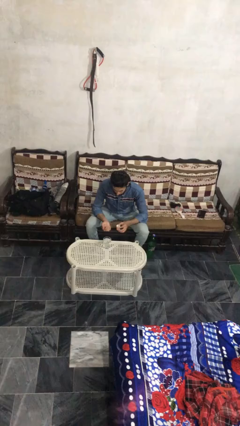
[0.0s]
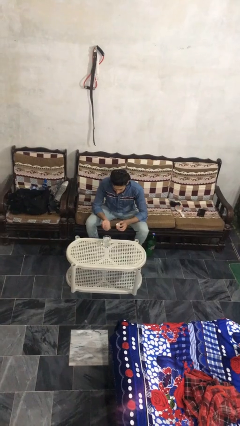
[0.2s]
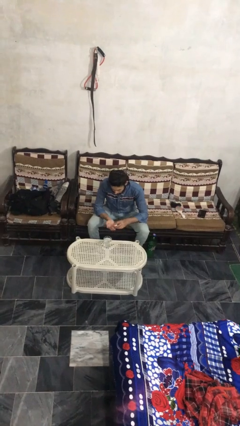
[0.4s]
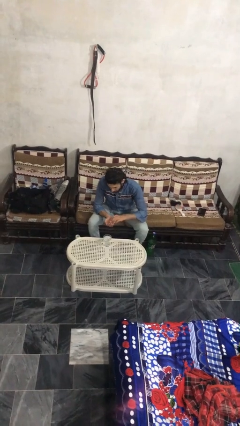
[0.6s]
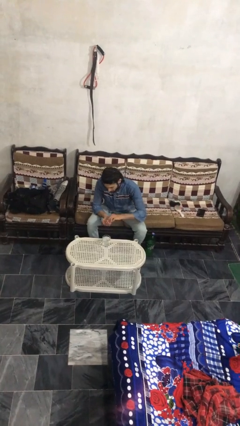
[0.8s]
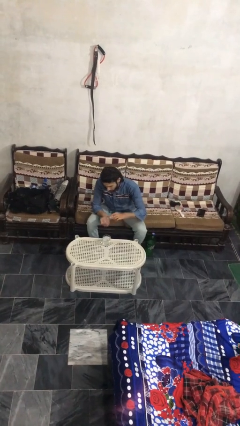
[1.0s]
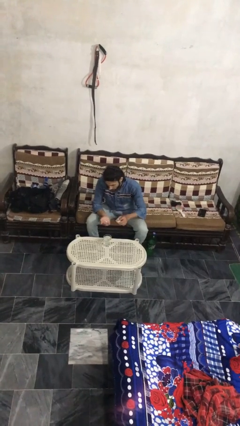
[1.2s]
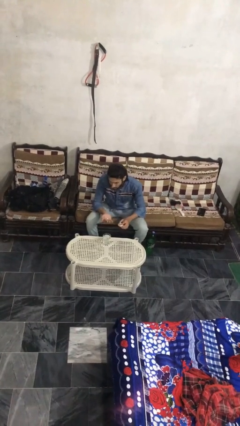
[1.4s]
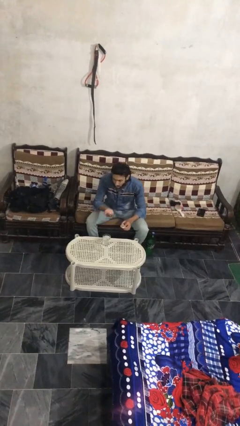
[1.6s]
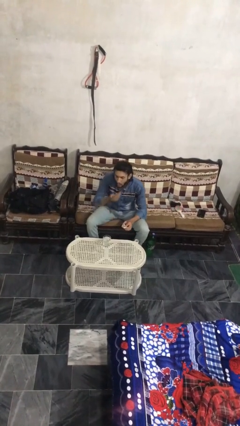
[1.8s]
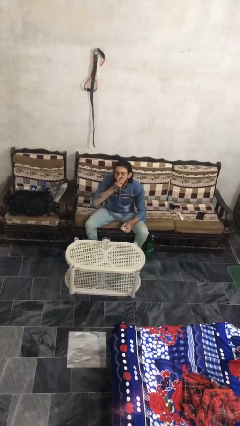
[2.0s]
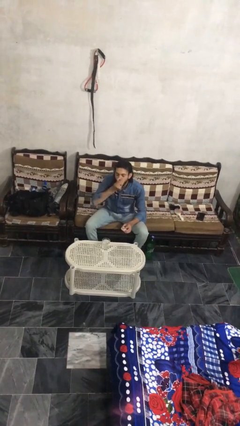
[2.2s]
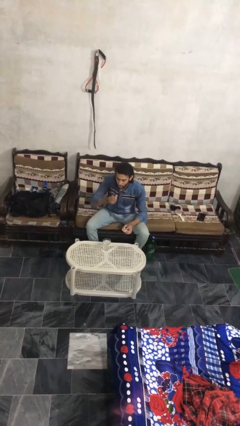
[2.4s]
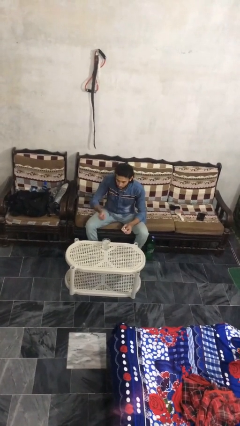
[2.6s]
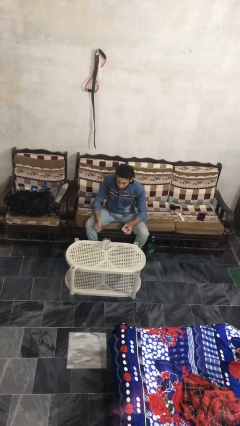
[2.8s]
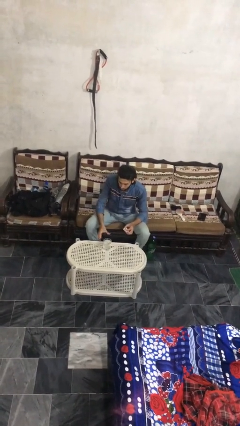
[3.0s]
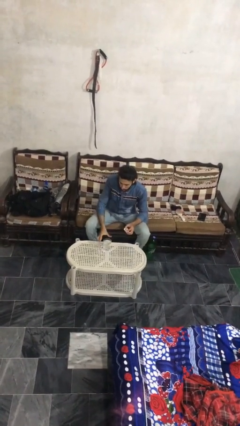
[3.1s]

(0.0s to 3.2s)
person takes medicine pills

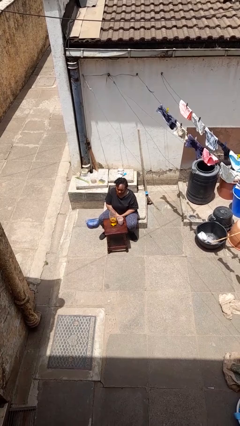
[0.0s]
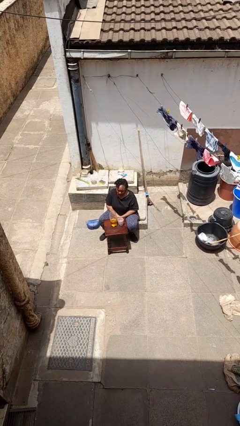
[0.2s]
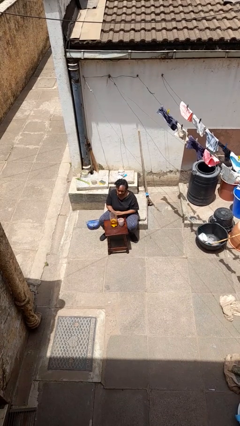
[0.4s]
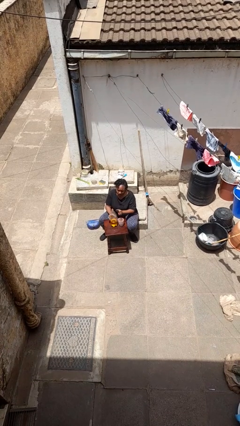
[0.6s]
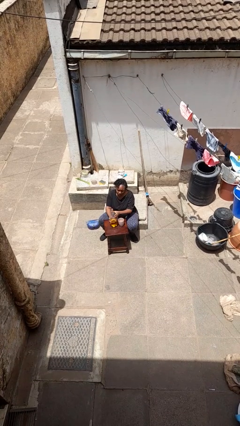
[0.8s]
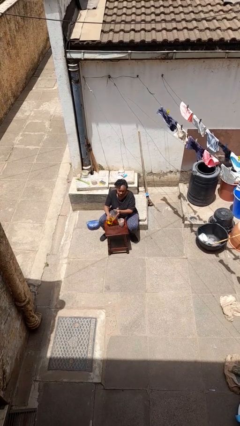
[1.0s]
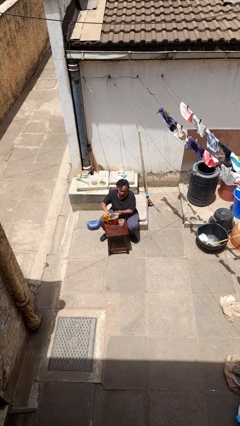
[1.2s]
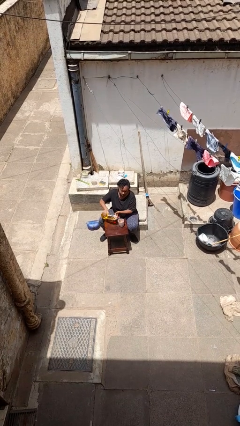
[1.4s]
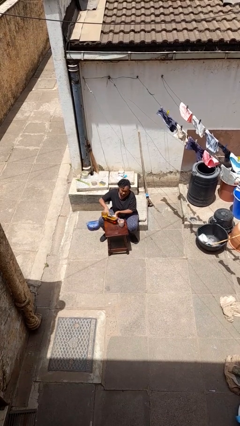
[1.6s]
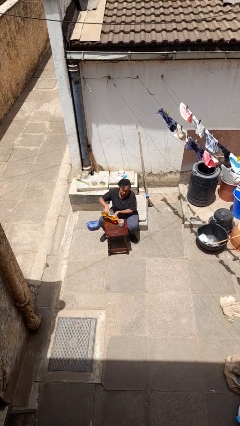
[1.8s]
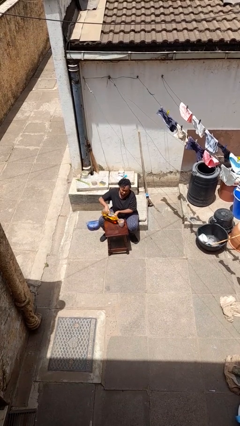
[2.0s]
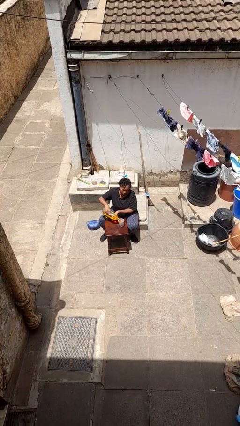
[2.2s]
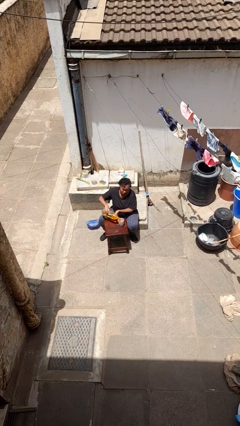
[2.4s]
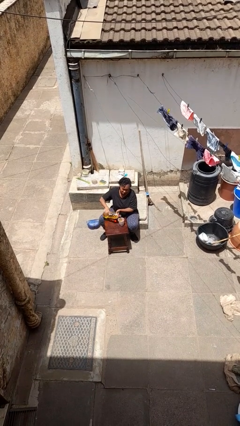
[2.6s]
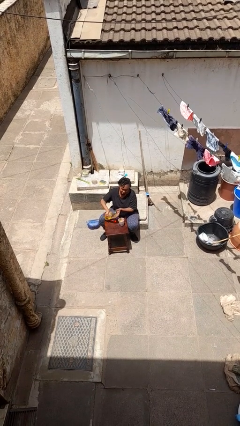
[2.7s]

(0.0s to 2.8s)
person pours liquid into cup

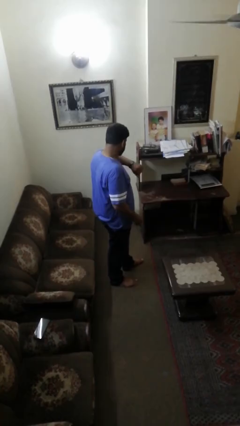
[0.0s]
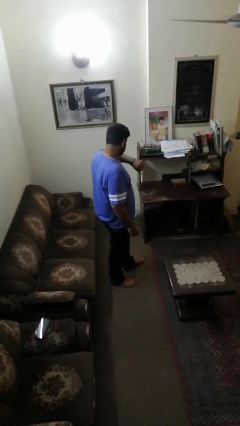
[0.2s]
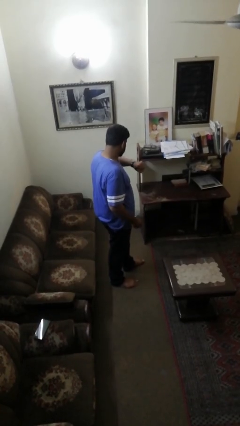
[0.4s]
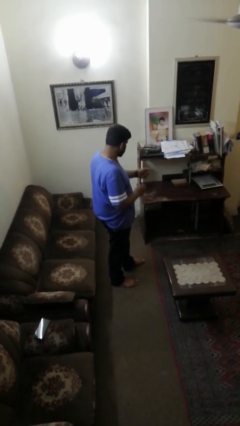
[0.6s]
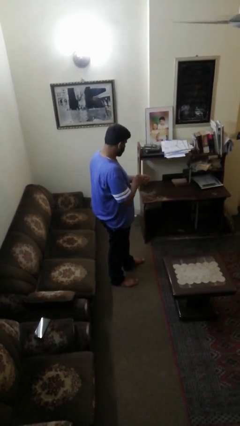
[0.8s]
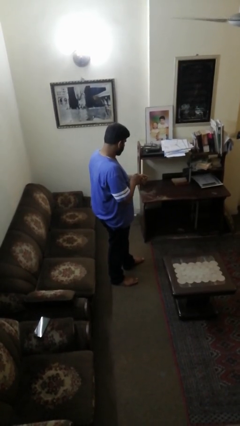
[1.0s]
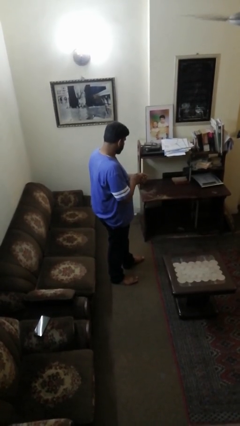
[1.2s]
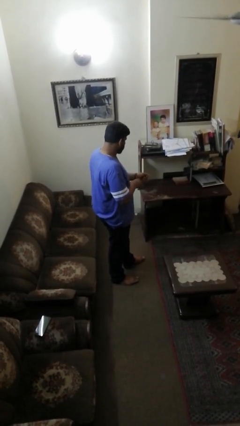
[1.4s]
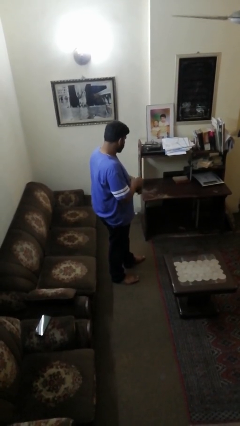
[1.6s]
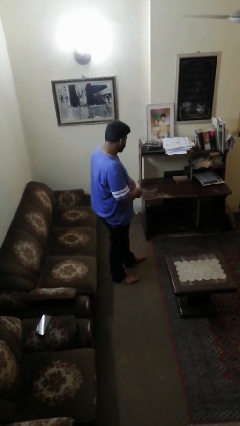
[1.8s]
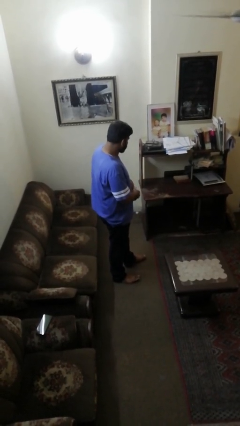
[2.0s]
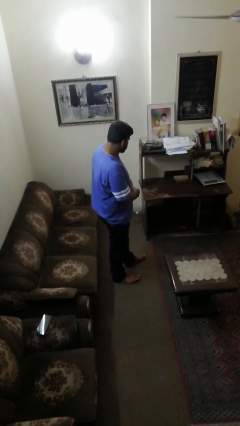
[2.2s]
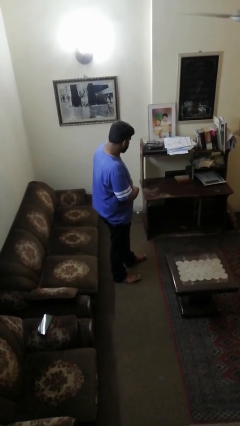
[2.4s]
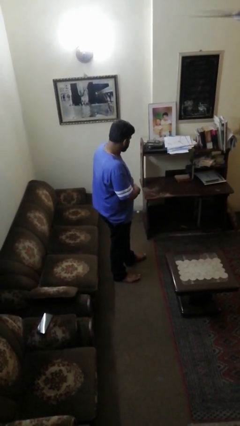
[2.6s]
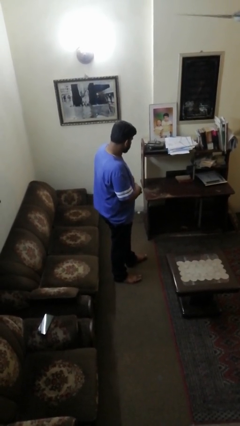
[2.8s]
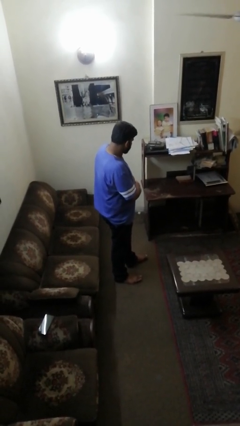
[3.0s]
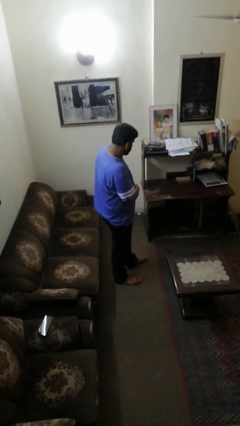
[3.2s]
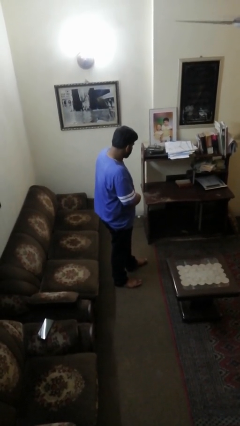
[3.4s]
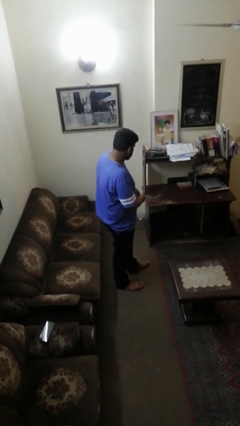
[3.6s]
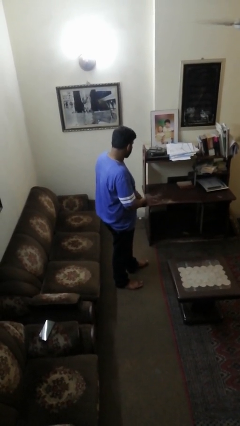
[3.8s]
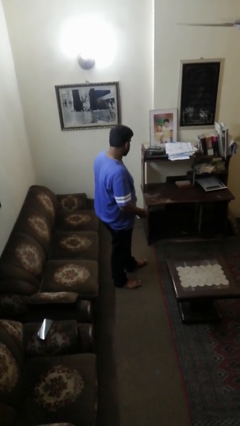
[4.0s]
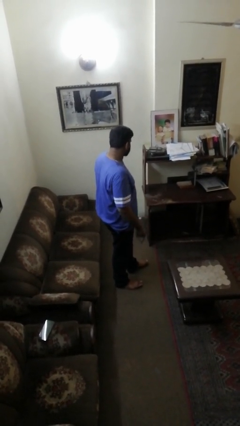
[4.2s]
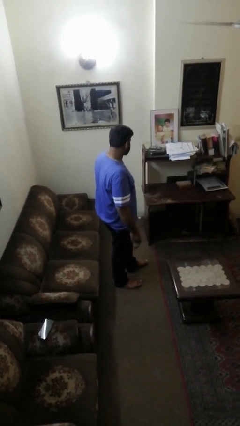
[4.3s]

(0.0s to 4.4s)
person takes off wristwatch

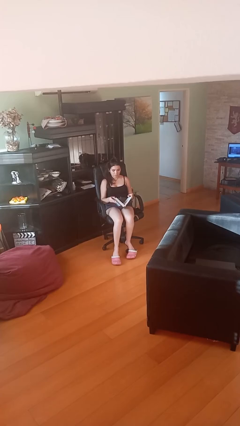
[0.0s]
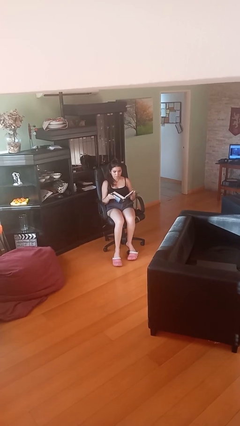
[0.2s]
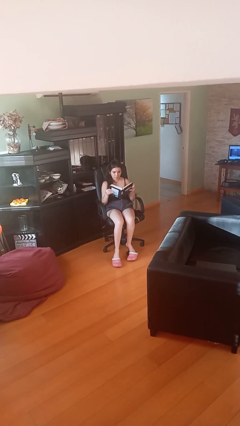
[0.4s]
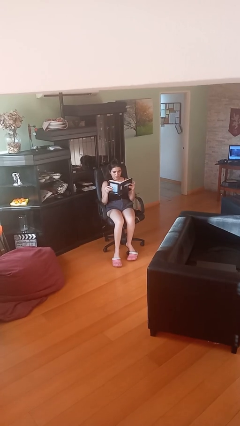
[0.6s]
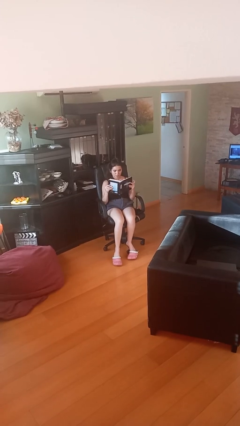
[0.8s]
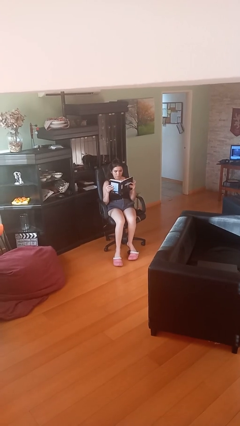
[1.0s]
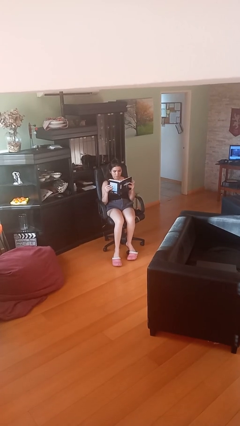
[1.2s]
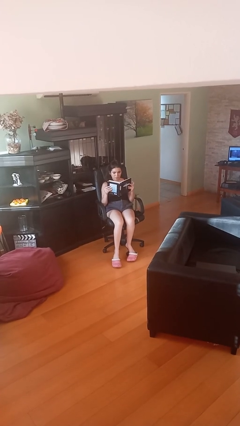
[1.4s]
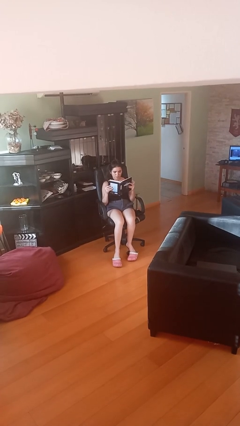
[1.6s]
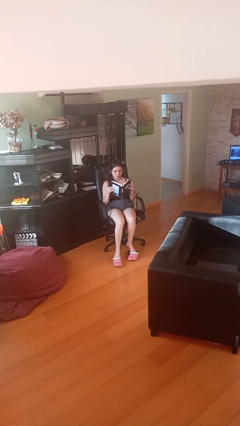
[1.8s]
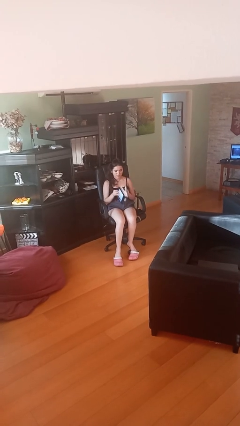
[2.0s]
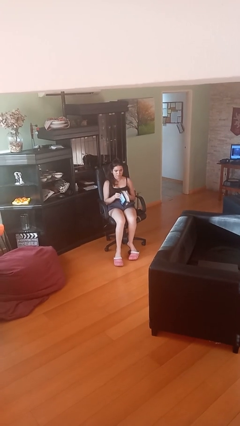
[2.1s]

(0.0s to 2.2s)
person reads document

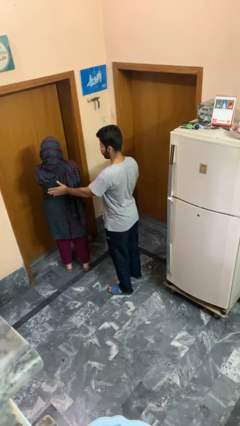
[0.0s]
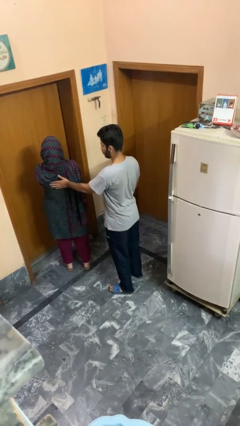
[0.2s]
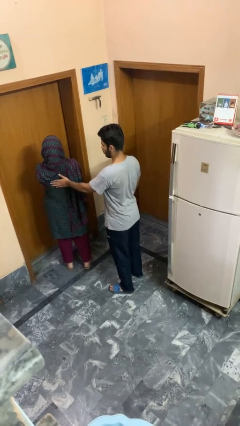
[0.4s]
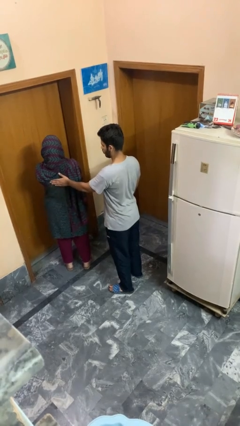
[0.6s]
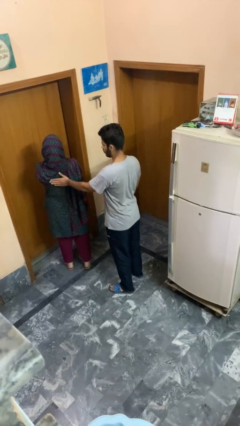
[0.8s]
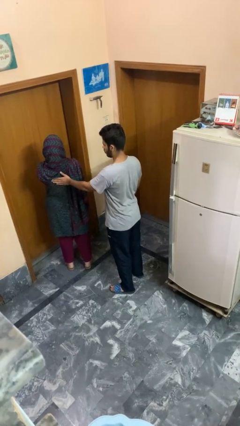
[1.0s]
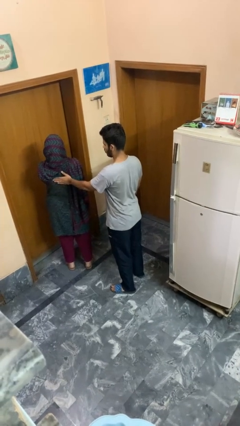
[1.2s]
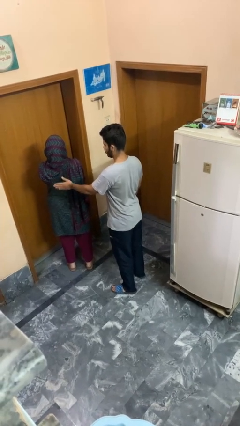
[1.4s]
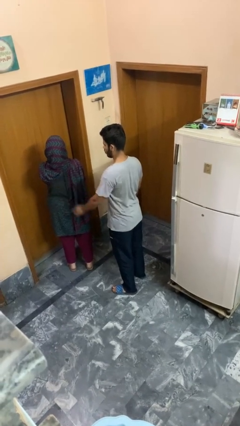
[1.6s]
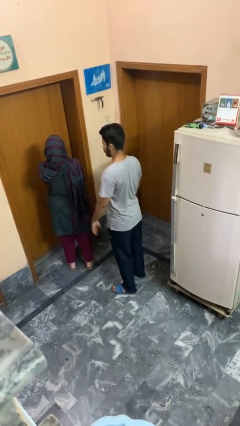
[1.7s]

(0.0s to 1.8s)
person touches back of person

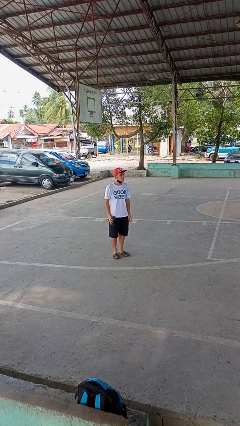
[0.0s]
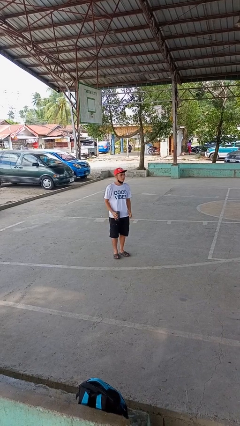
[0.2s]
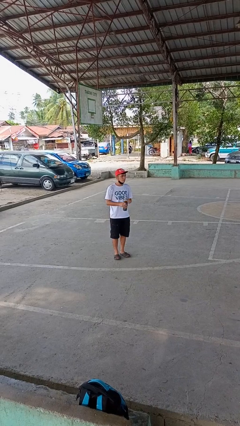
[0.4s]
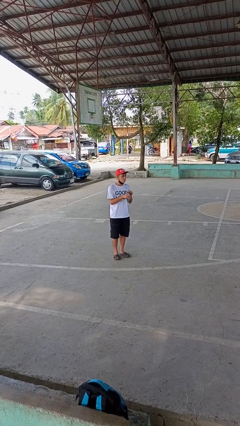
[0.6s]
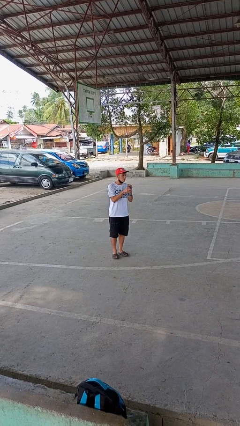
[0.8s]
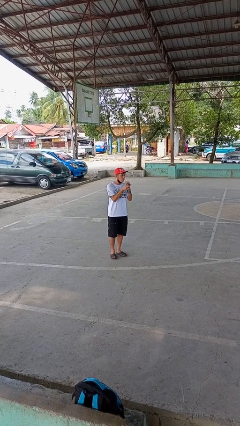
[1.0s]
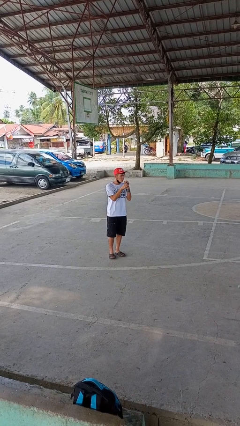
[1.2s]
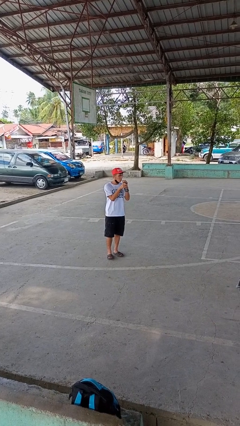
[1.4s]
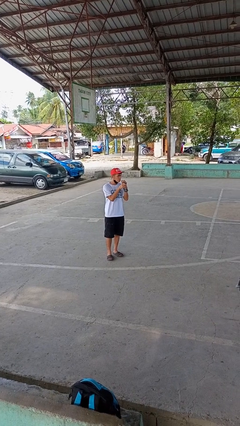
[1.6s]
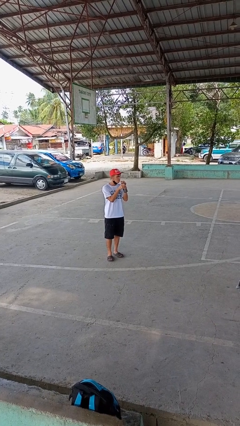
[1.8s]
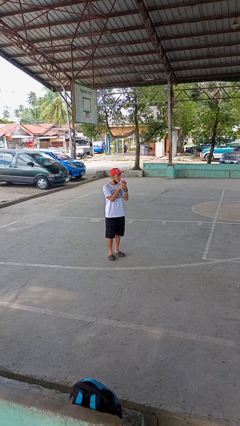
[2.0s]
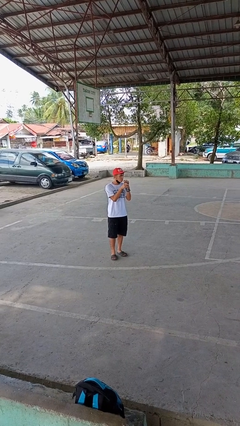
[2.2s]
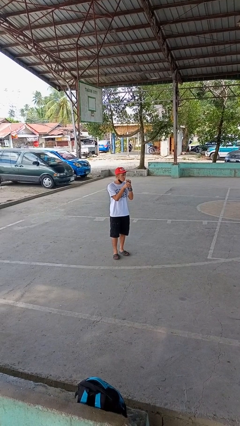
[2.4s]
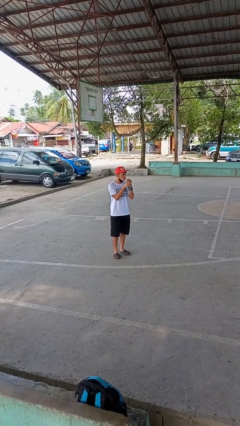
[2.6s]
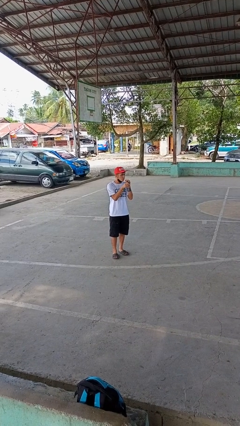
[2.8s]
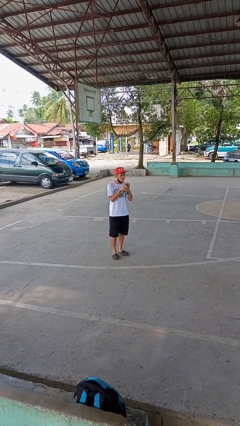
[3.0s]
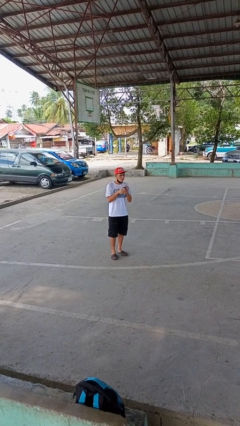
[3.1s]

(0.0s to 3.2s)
person drinks from straw
